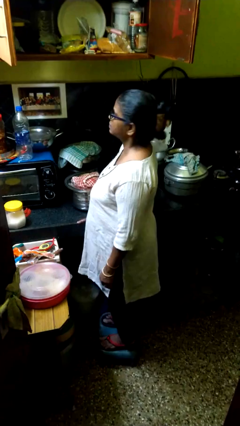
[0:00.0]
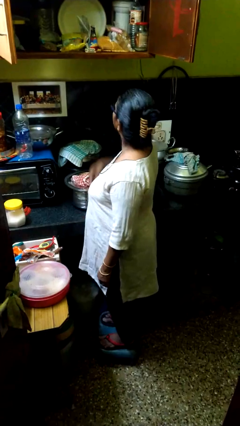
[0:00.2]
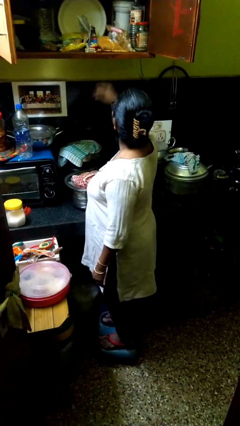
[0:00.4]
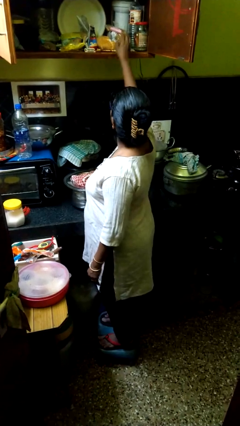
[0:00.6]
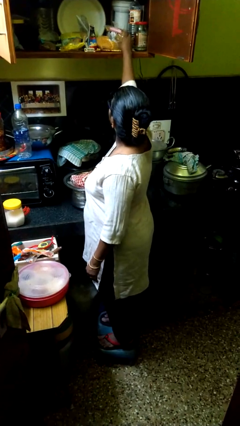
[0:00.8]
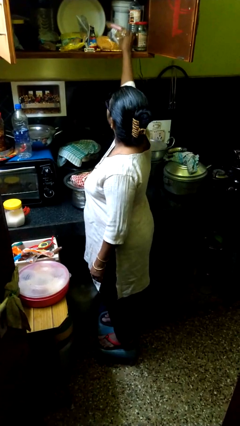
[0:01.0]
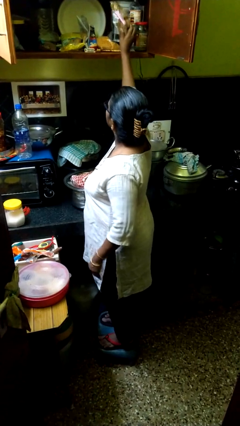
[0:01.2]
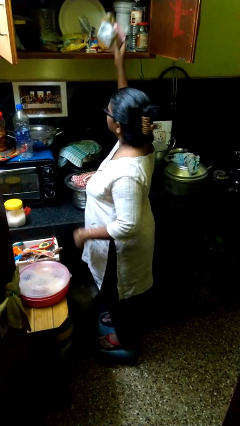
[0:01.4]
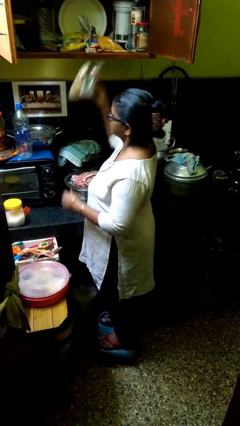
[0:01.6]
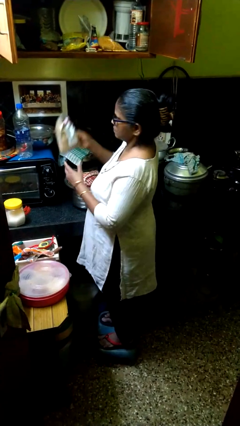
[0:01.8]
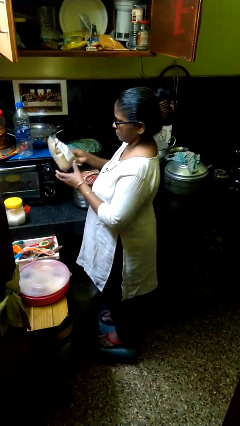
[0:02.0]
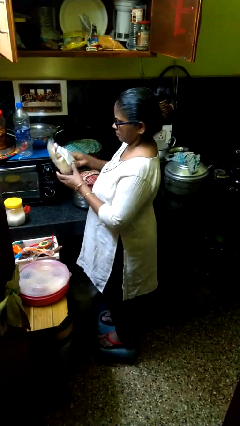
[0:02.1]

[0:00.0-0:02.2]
person takes object from cabinet

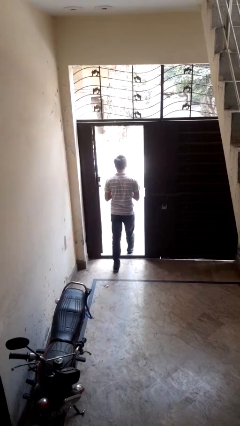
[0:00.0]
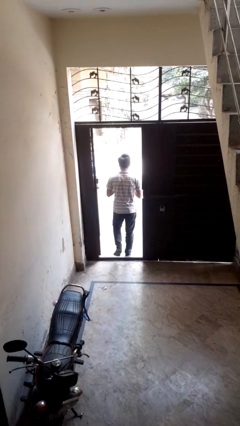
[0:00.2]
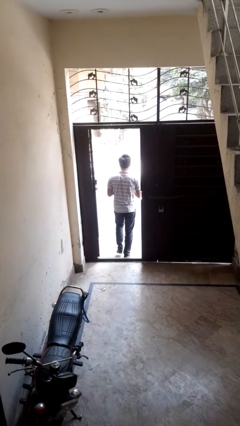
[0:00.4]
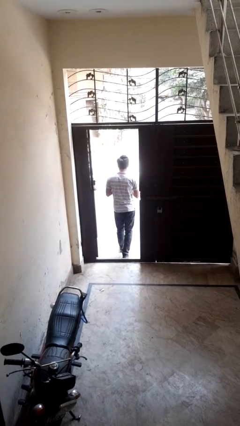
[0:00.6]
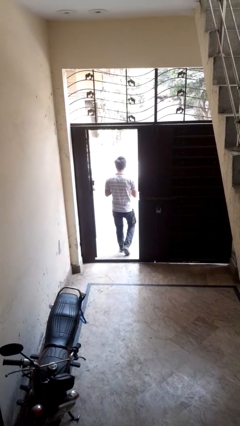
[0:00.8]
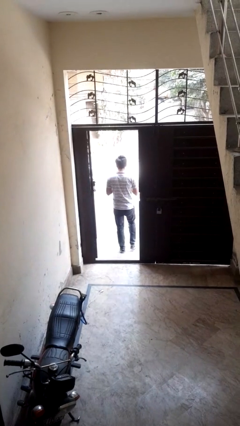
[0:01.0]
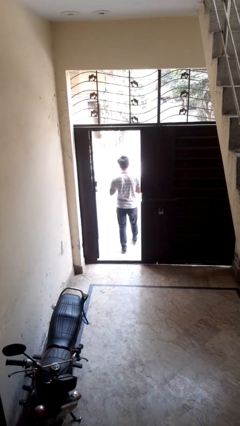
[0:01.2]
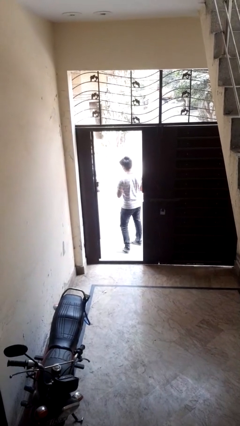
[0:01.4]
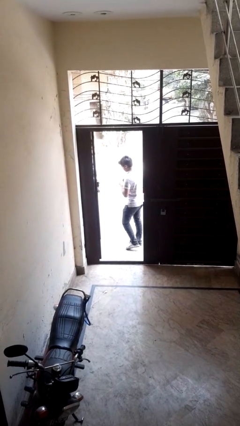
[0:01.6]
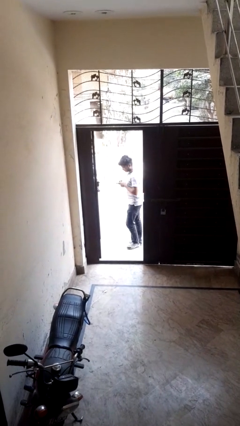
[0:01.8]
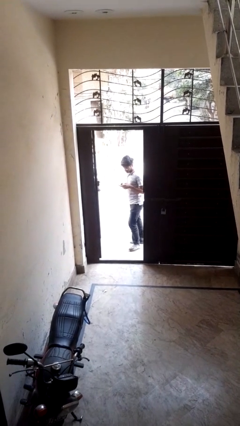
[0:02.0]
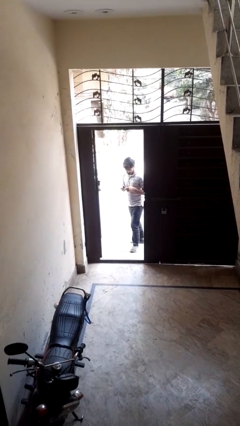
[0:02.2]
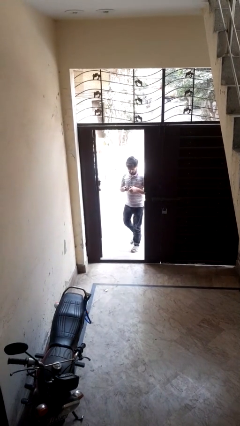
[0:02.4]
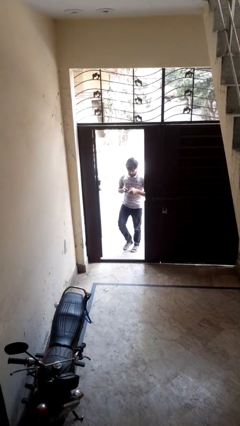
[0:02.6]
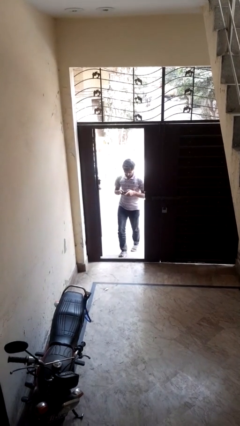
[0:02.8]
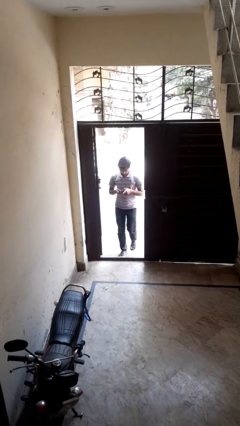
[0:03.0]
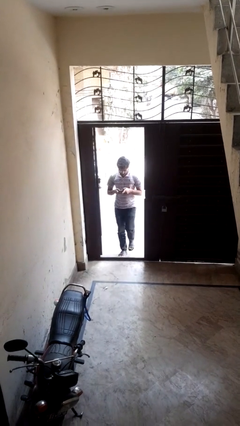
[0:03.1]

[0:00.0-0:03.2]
person exits scene through structure

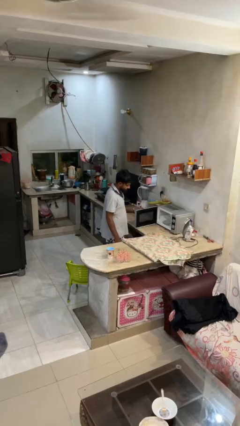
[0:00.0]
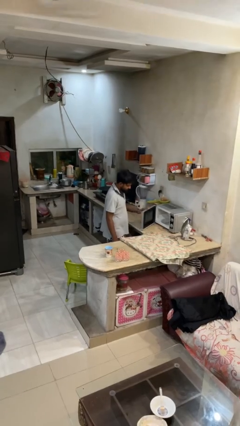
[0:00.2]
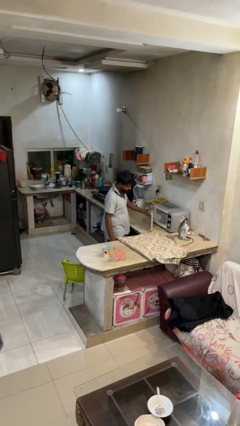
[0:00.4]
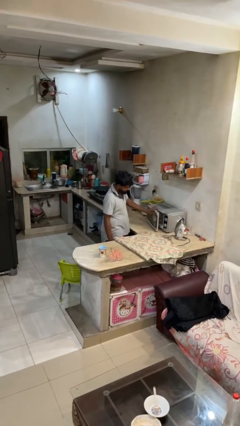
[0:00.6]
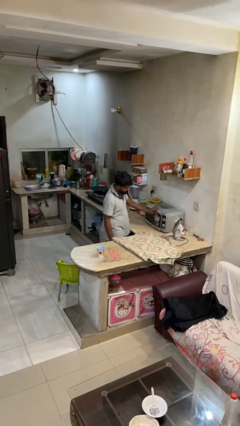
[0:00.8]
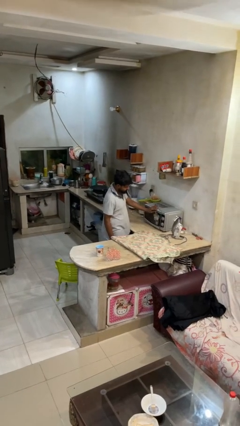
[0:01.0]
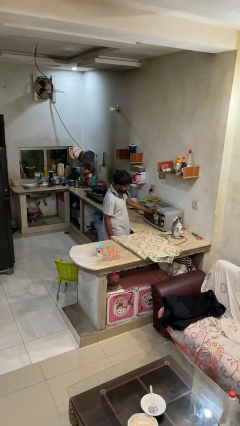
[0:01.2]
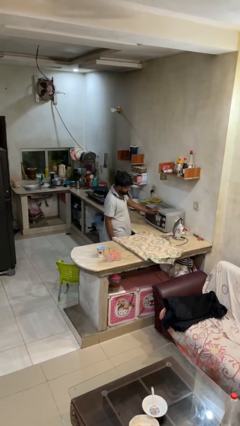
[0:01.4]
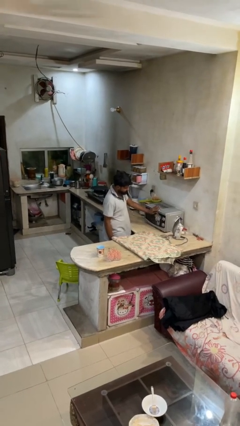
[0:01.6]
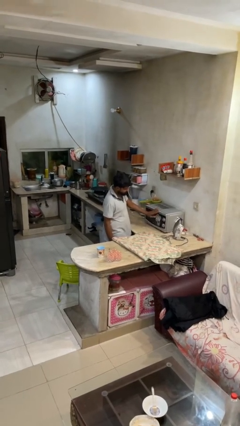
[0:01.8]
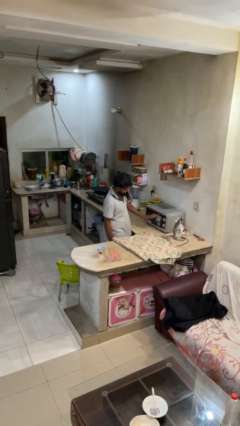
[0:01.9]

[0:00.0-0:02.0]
person closes microwave

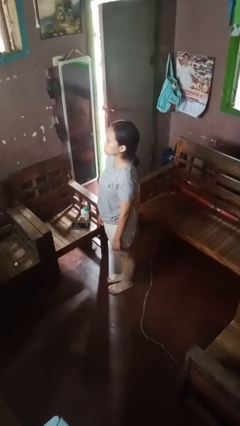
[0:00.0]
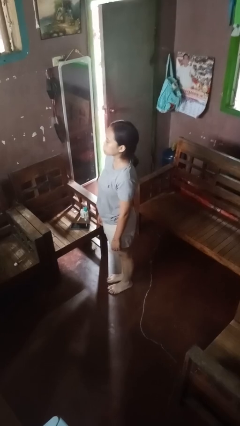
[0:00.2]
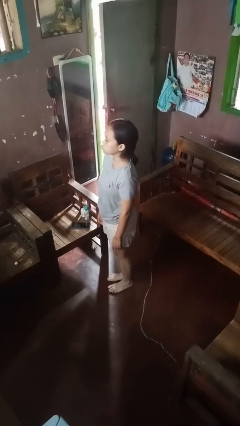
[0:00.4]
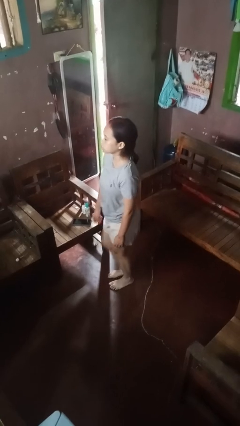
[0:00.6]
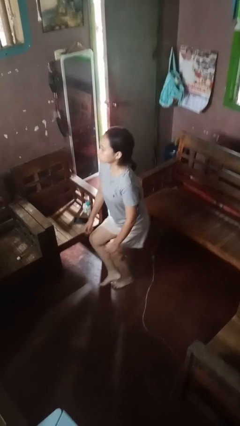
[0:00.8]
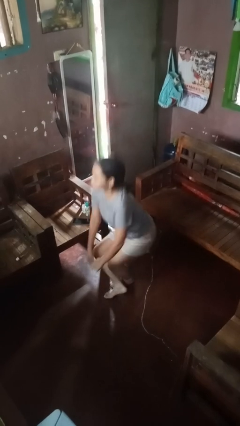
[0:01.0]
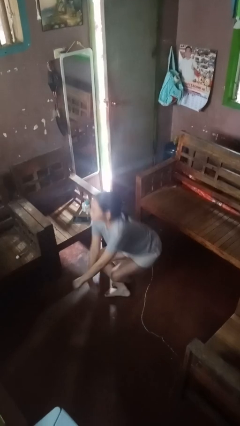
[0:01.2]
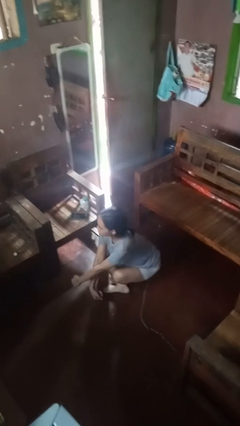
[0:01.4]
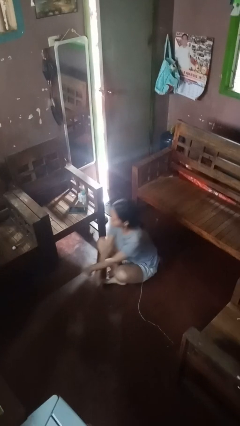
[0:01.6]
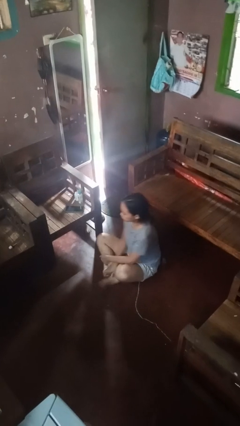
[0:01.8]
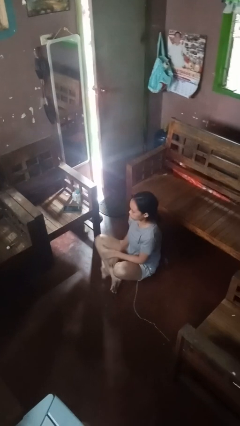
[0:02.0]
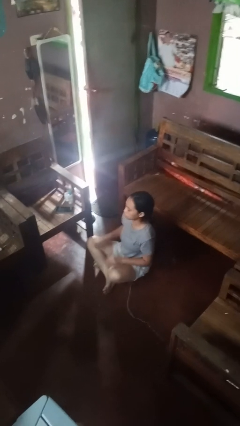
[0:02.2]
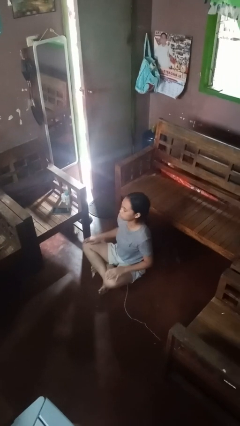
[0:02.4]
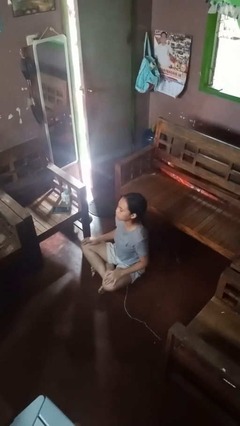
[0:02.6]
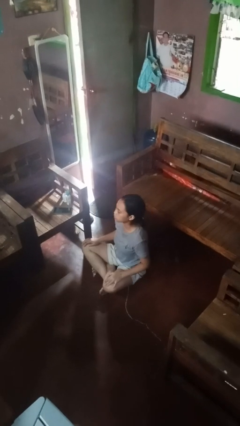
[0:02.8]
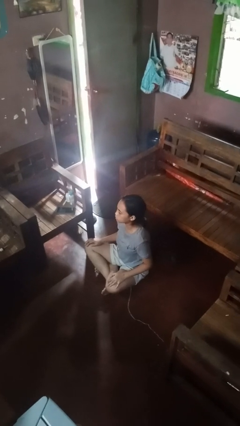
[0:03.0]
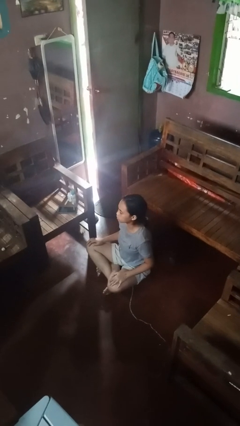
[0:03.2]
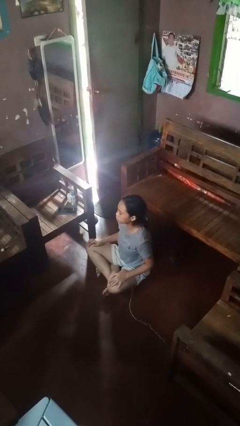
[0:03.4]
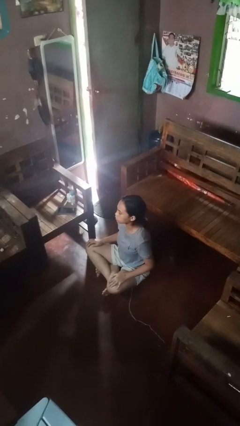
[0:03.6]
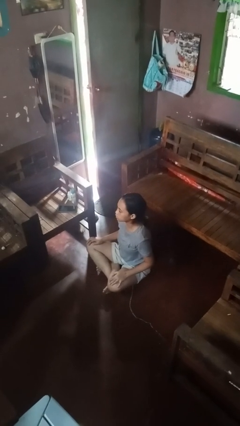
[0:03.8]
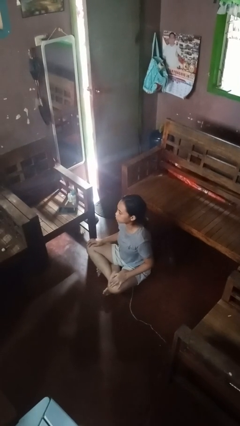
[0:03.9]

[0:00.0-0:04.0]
person sits crisscross

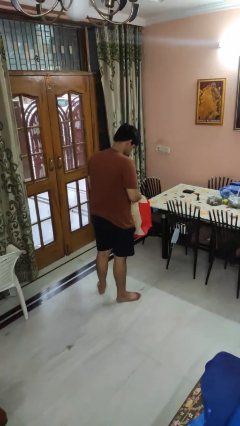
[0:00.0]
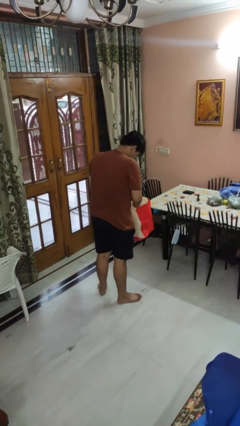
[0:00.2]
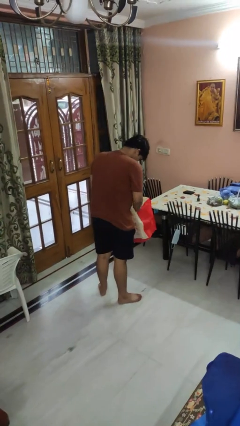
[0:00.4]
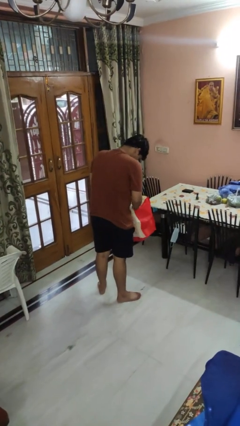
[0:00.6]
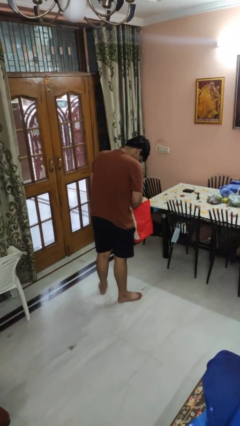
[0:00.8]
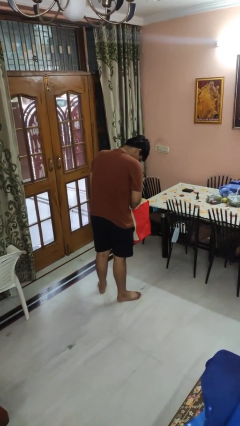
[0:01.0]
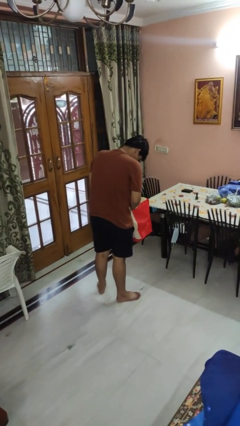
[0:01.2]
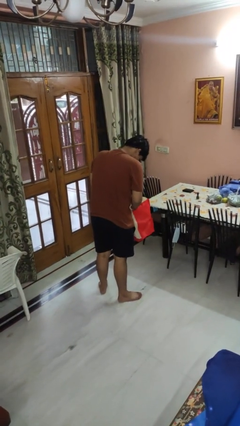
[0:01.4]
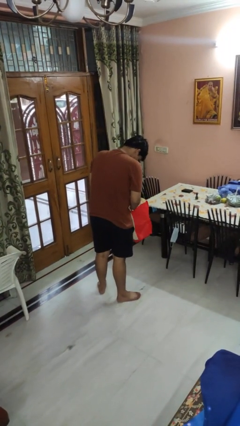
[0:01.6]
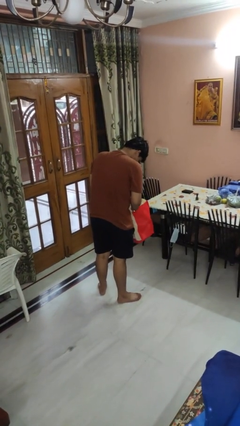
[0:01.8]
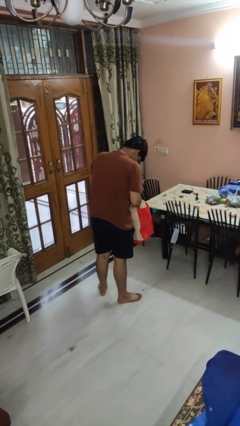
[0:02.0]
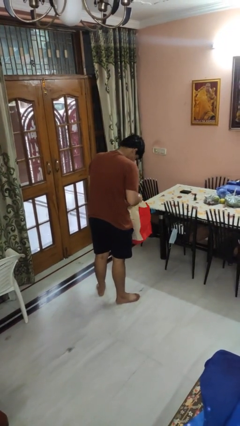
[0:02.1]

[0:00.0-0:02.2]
person searches in bag

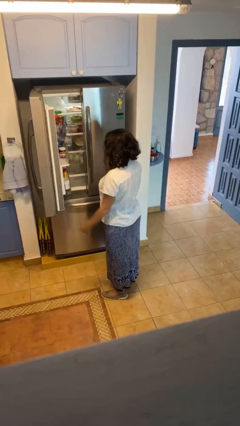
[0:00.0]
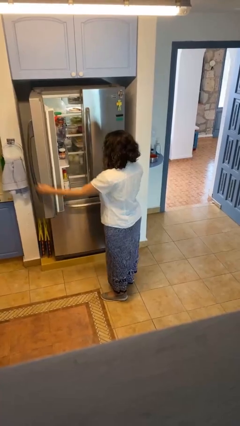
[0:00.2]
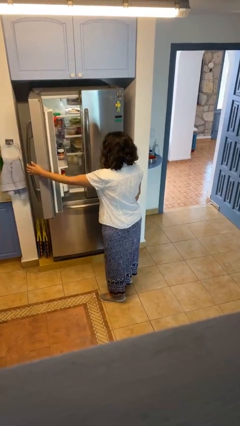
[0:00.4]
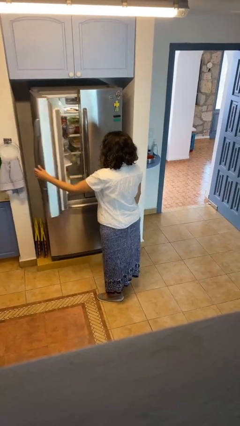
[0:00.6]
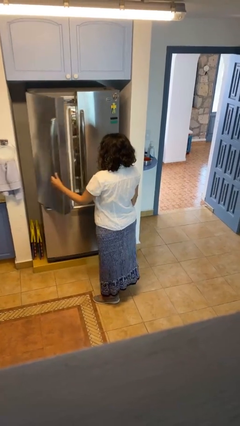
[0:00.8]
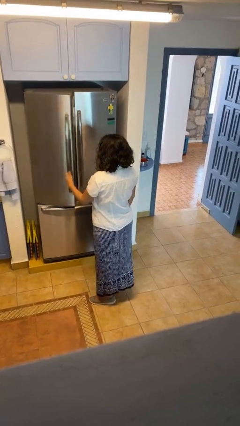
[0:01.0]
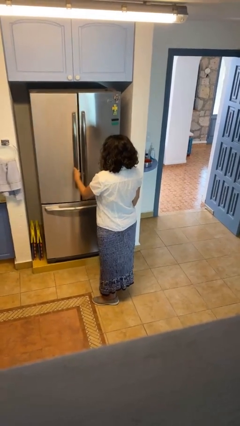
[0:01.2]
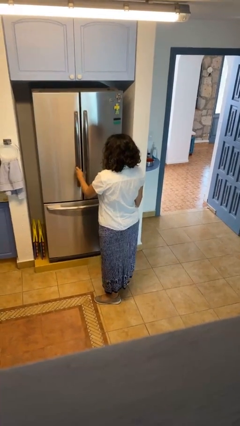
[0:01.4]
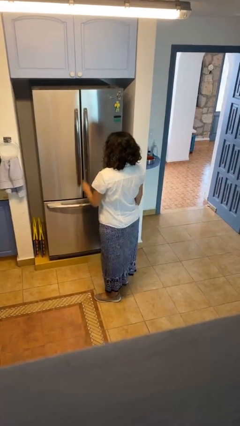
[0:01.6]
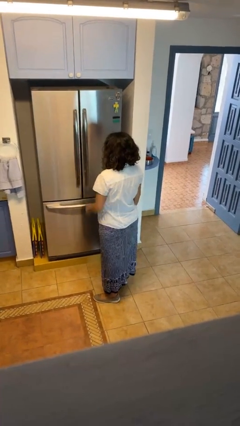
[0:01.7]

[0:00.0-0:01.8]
person closes refrigerator

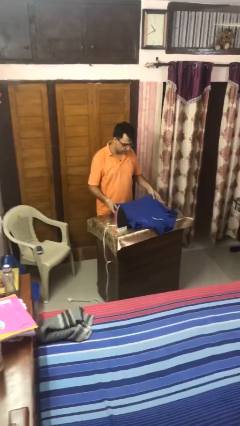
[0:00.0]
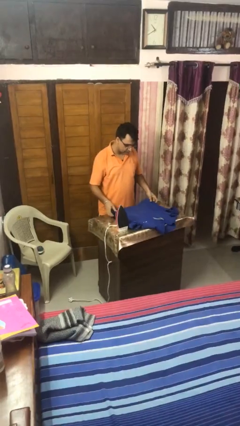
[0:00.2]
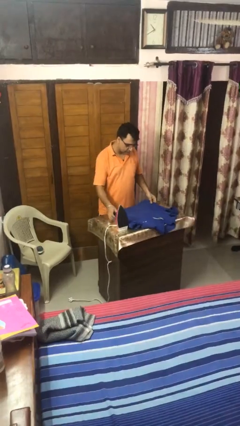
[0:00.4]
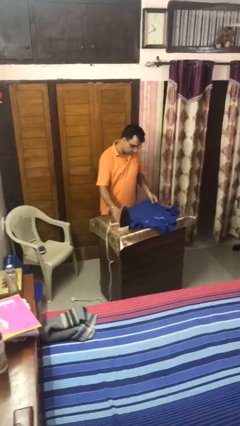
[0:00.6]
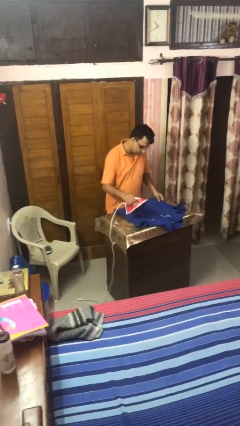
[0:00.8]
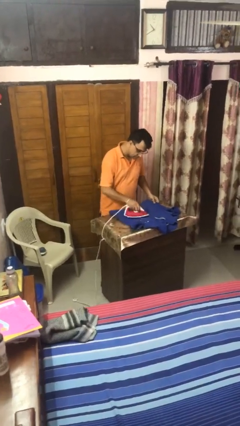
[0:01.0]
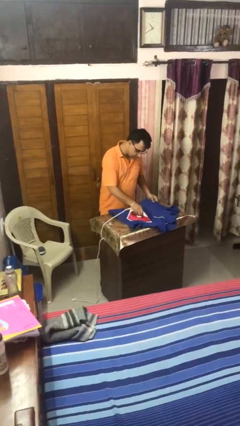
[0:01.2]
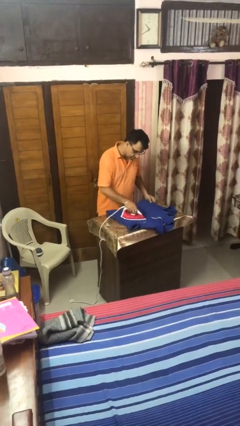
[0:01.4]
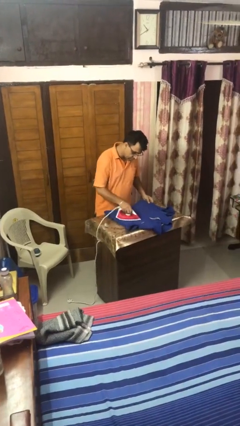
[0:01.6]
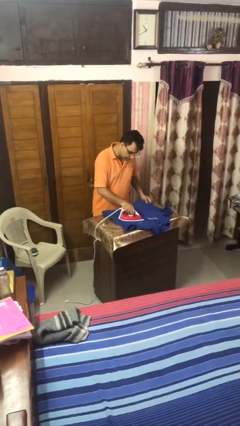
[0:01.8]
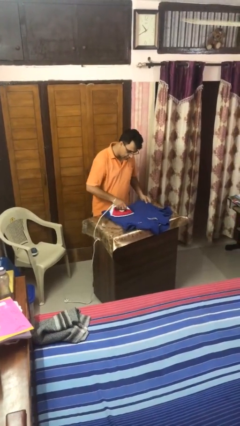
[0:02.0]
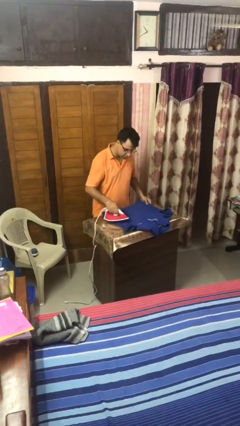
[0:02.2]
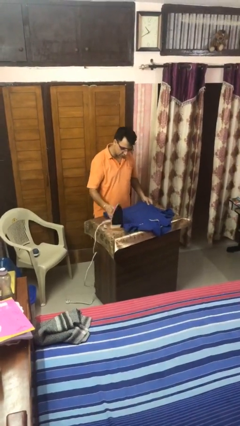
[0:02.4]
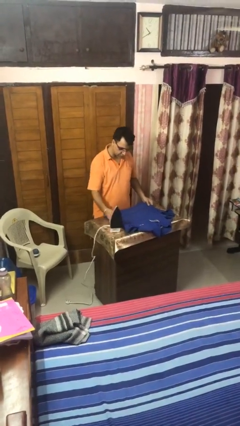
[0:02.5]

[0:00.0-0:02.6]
person irons clothes
